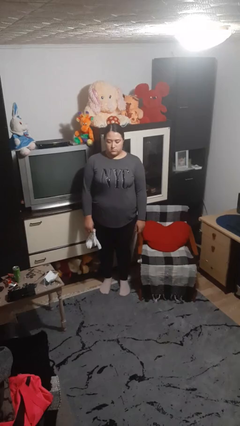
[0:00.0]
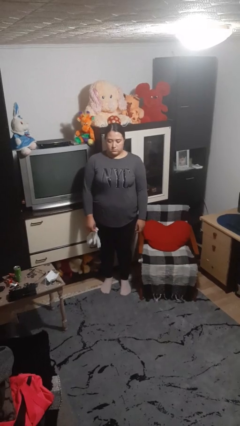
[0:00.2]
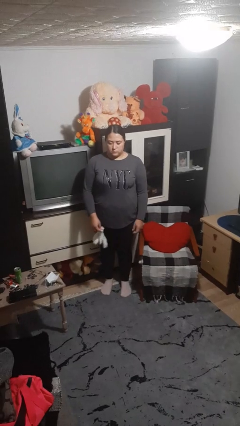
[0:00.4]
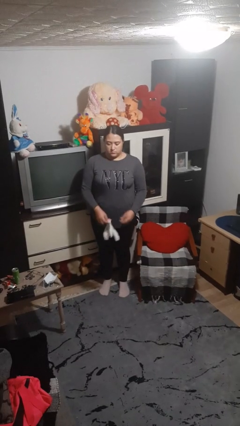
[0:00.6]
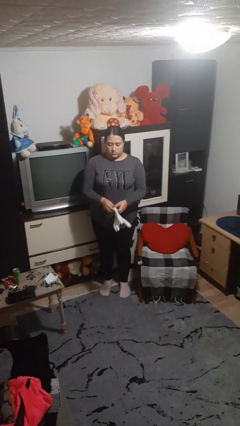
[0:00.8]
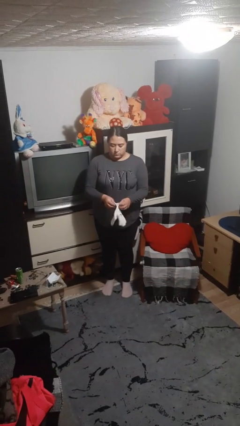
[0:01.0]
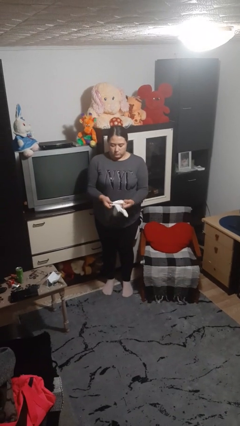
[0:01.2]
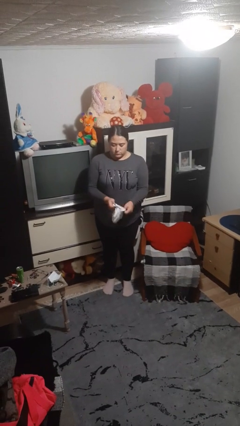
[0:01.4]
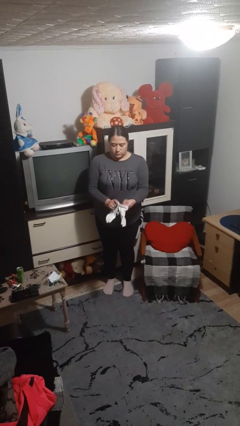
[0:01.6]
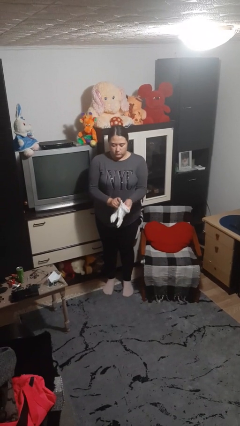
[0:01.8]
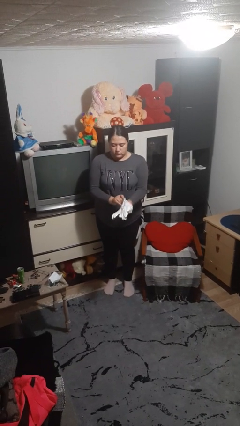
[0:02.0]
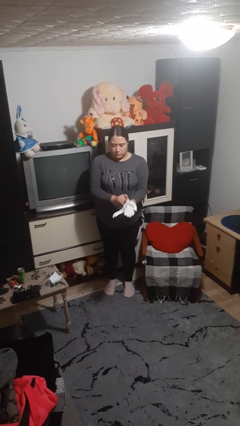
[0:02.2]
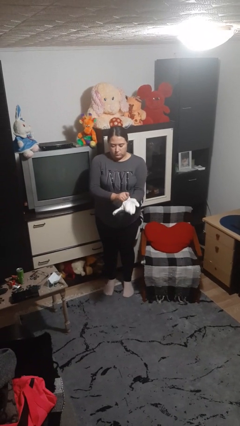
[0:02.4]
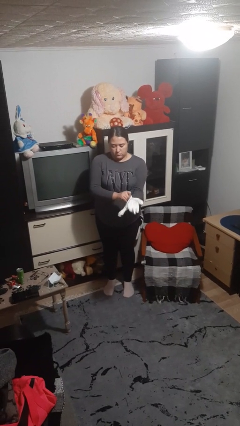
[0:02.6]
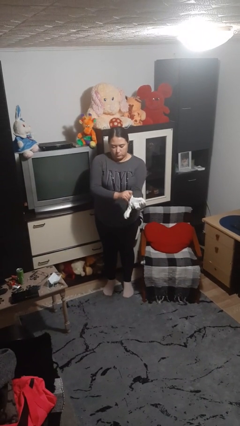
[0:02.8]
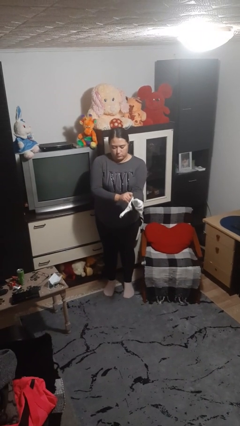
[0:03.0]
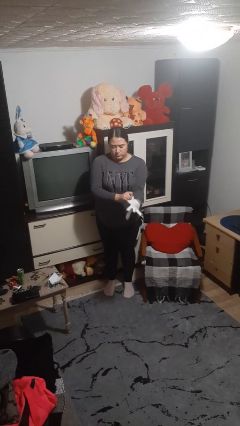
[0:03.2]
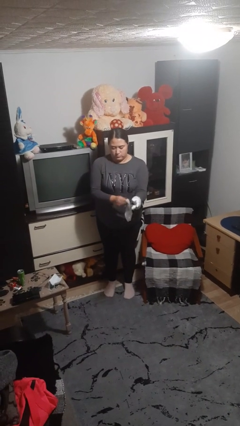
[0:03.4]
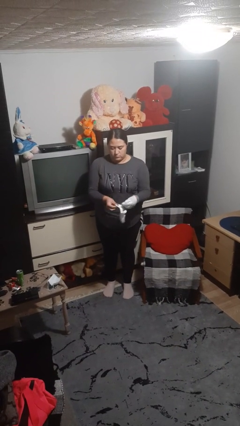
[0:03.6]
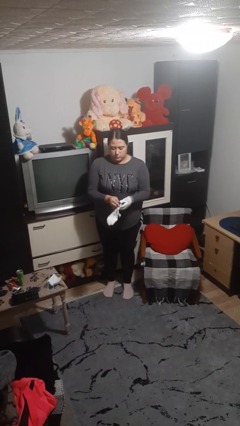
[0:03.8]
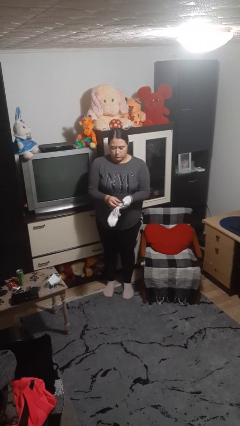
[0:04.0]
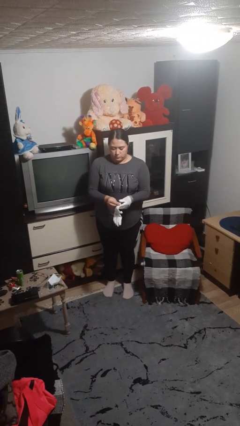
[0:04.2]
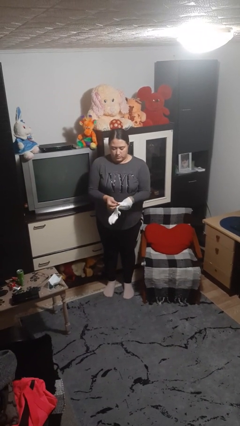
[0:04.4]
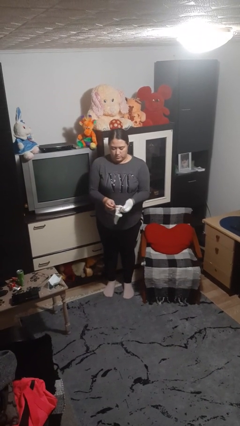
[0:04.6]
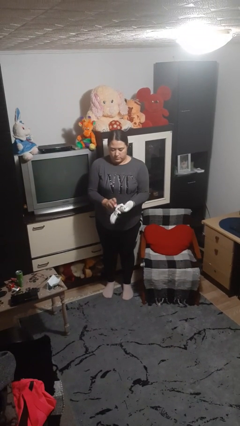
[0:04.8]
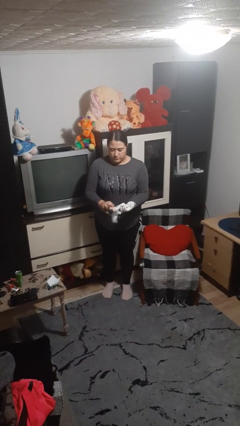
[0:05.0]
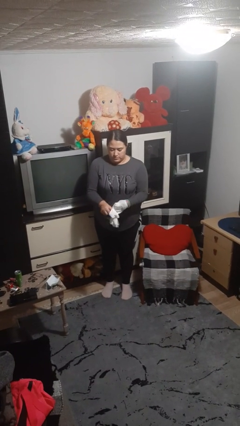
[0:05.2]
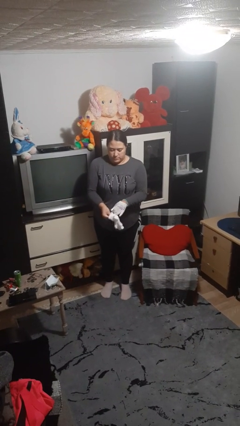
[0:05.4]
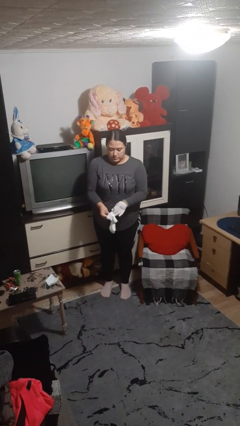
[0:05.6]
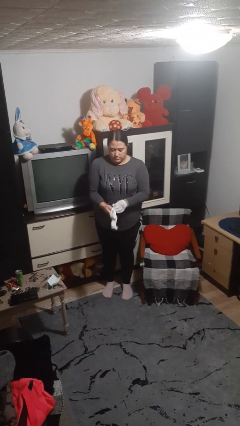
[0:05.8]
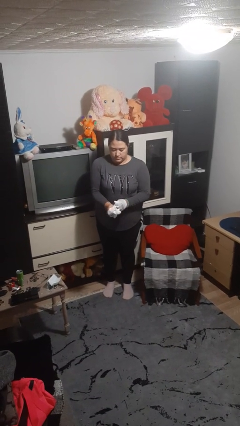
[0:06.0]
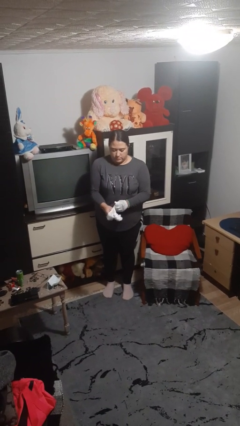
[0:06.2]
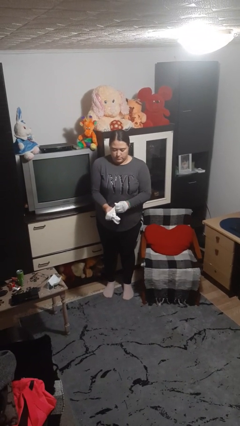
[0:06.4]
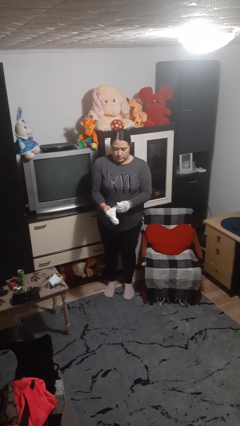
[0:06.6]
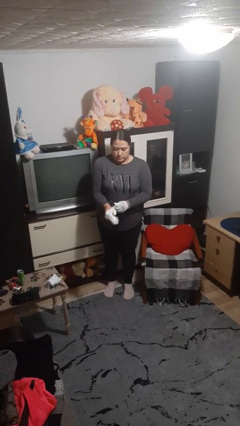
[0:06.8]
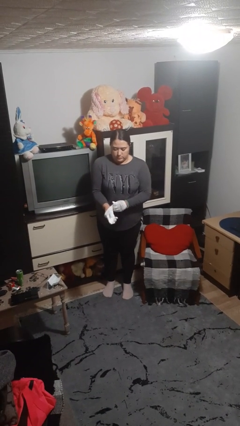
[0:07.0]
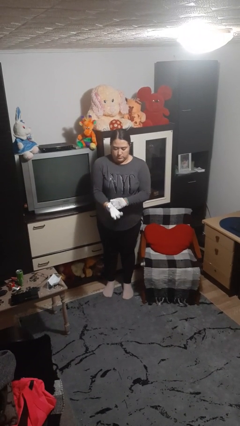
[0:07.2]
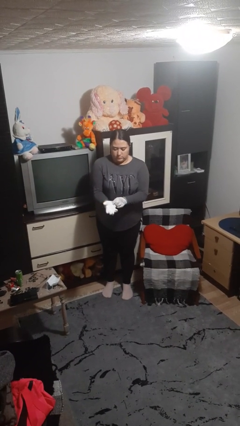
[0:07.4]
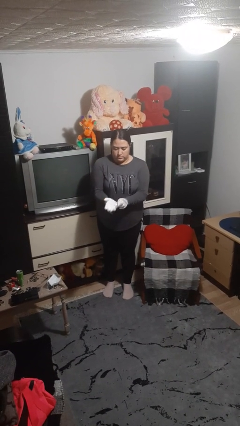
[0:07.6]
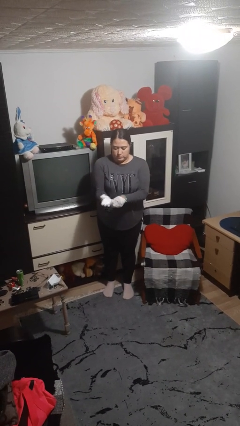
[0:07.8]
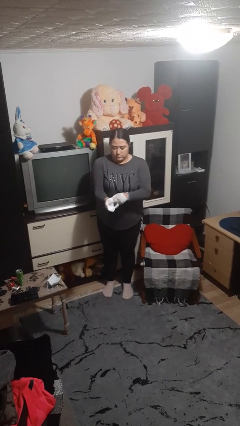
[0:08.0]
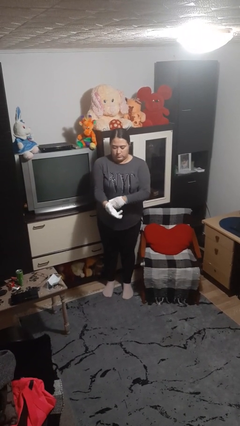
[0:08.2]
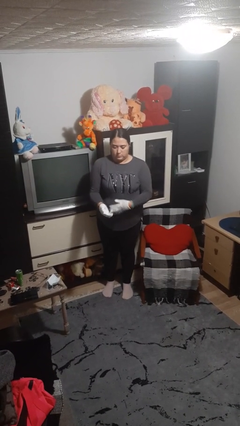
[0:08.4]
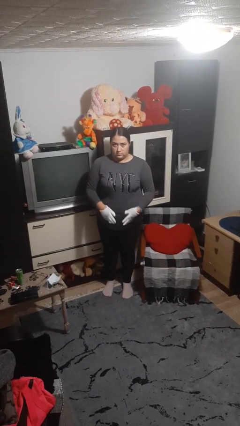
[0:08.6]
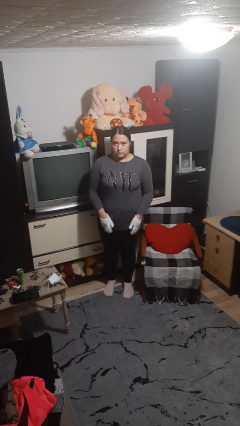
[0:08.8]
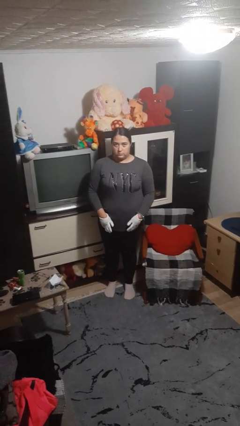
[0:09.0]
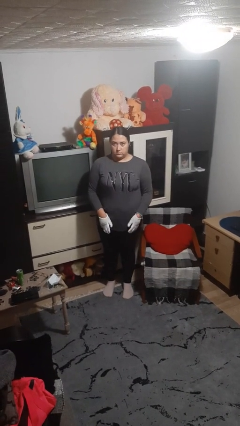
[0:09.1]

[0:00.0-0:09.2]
person puts on gloves

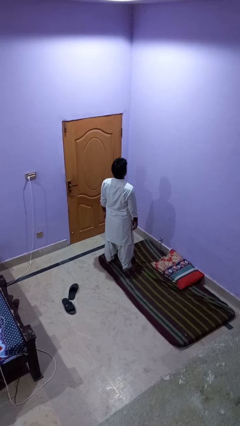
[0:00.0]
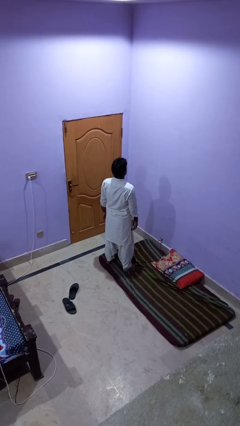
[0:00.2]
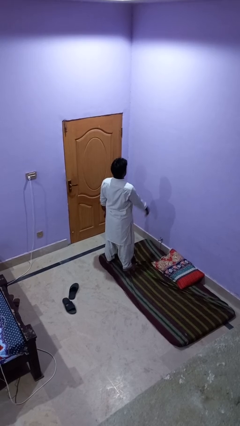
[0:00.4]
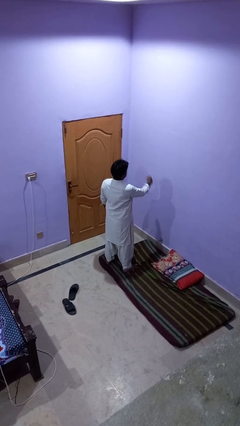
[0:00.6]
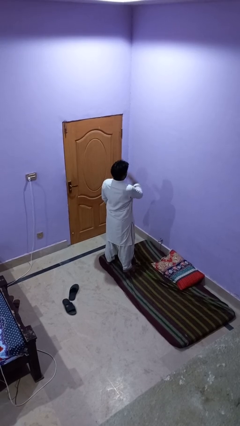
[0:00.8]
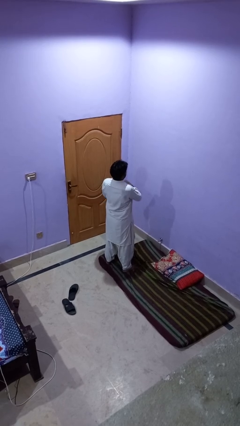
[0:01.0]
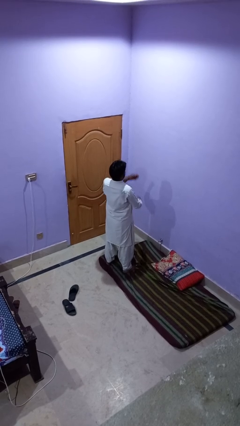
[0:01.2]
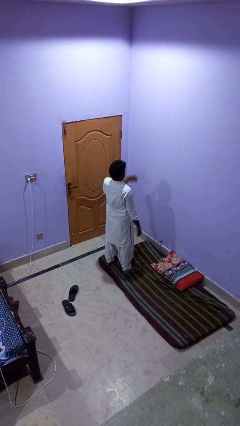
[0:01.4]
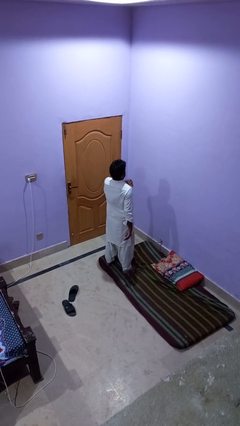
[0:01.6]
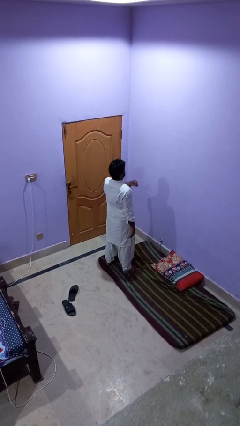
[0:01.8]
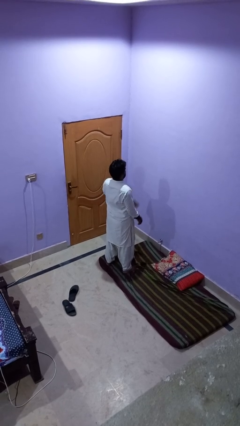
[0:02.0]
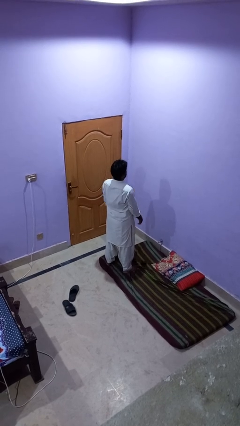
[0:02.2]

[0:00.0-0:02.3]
person drums on chest

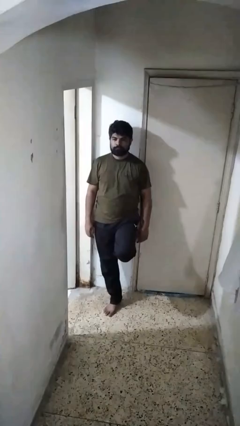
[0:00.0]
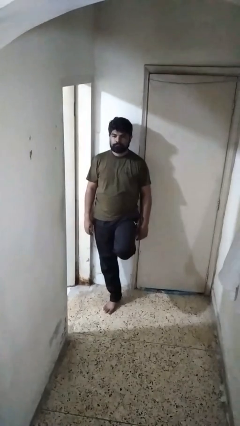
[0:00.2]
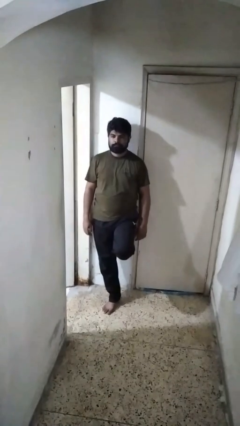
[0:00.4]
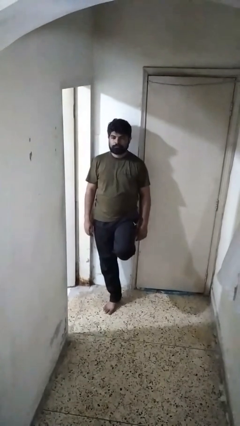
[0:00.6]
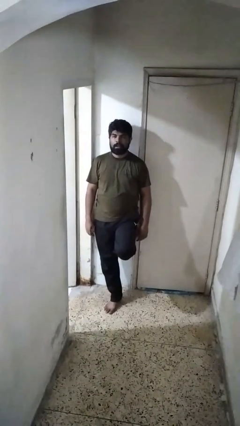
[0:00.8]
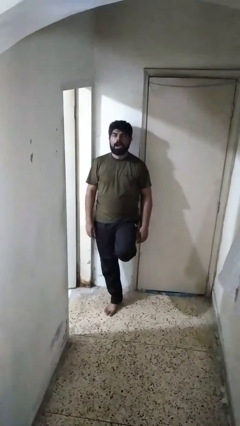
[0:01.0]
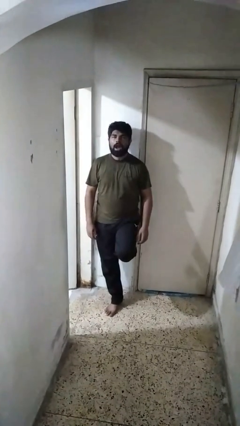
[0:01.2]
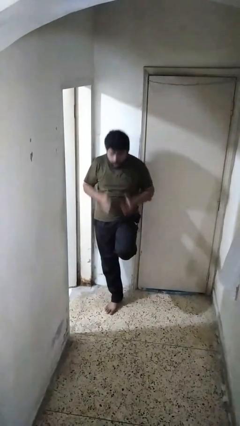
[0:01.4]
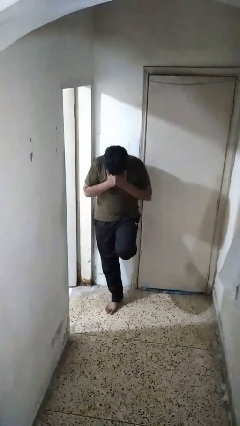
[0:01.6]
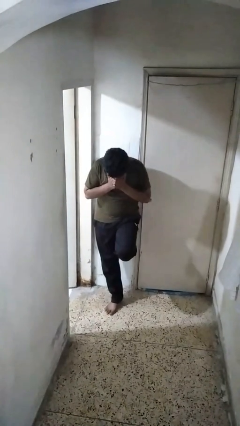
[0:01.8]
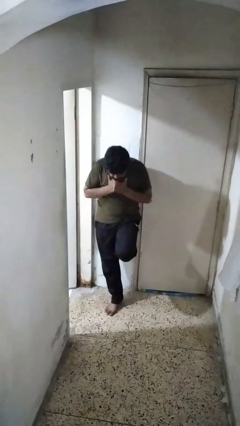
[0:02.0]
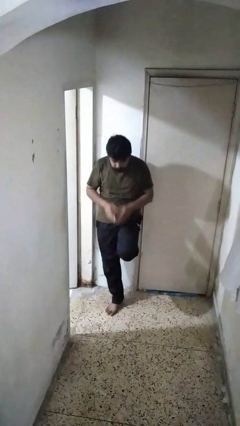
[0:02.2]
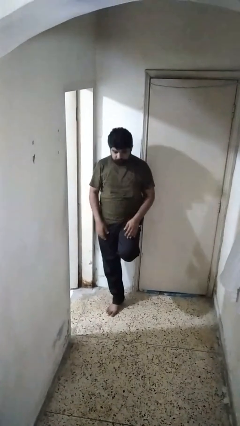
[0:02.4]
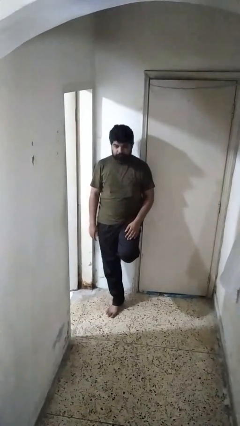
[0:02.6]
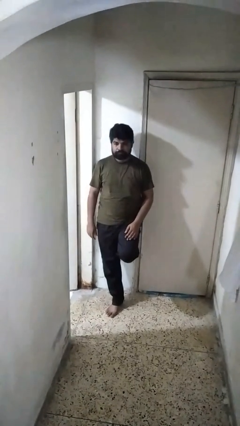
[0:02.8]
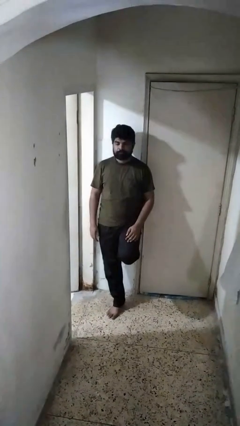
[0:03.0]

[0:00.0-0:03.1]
person sneezes into hand

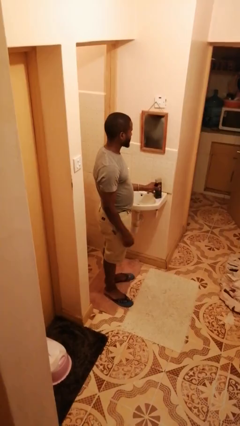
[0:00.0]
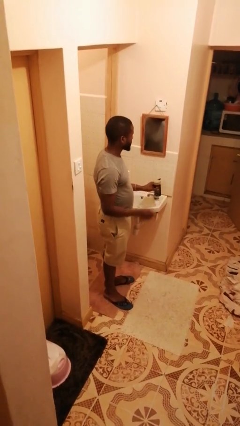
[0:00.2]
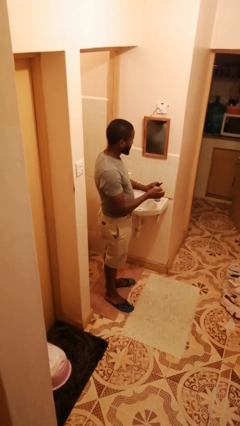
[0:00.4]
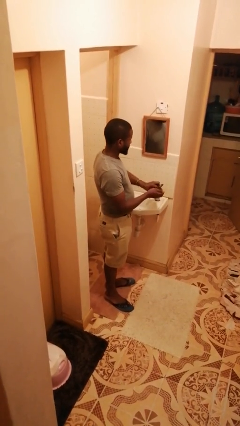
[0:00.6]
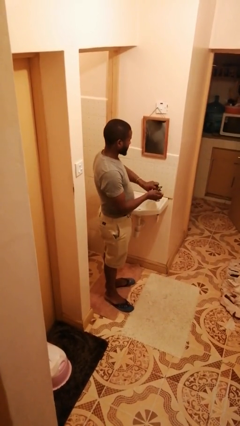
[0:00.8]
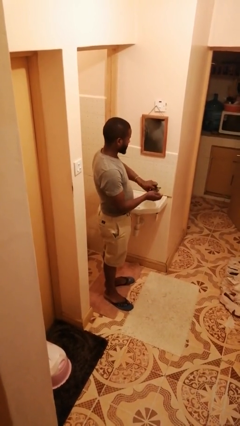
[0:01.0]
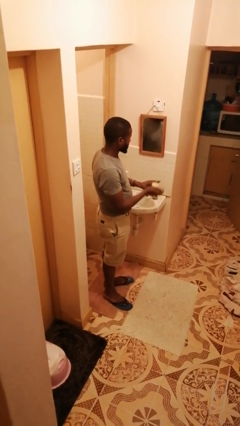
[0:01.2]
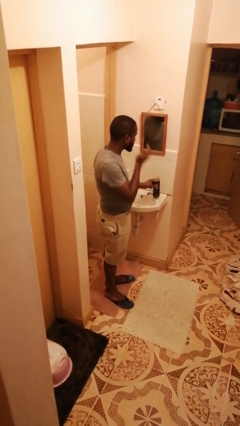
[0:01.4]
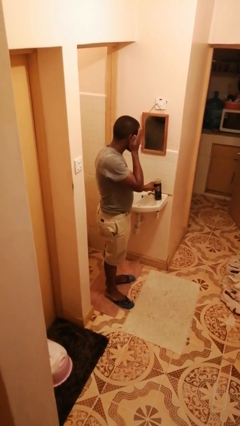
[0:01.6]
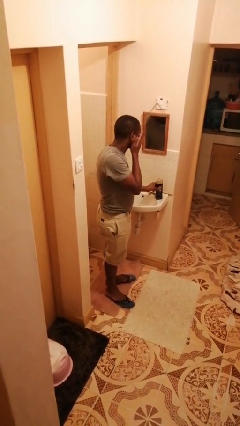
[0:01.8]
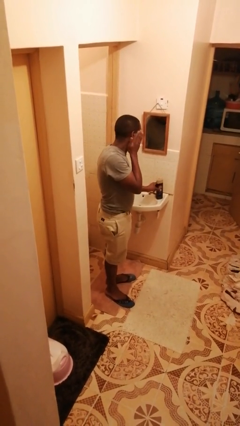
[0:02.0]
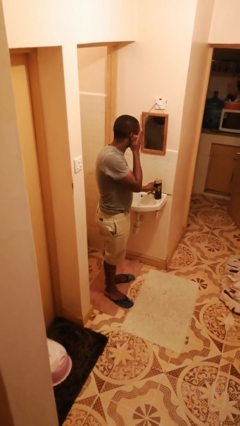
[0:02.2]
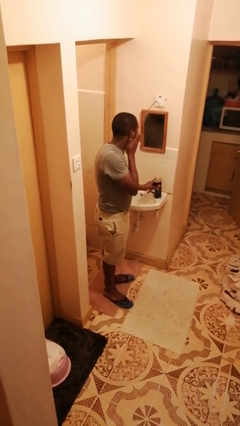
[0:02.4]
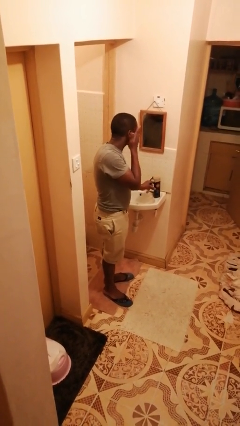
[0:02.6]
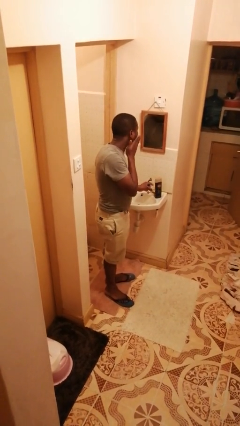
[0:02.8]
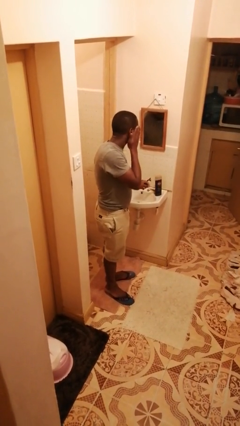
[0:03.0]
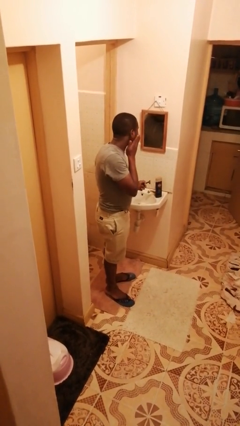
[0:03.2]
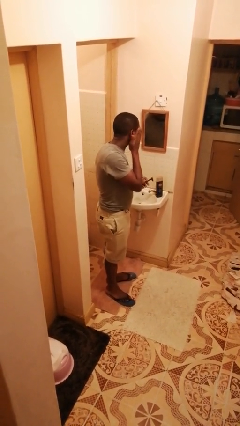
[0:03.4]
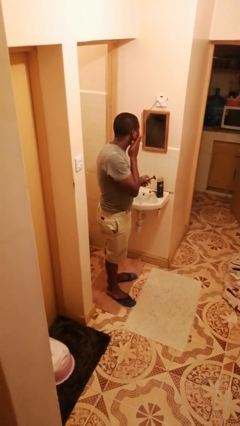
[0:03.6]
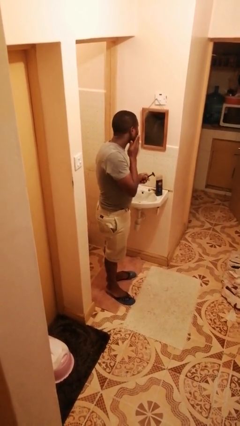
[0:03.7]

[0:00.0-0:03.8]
person applies shaving cream
